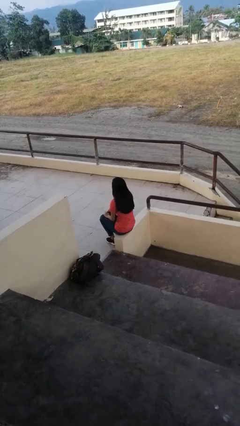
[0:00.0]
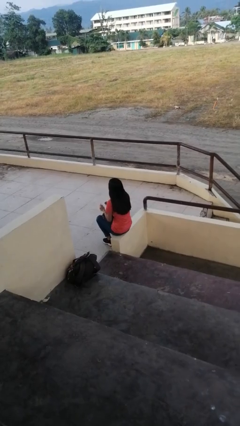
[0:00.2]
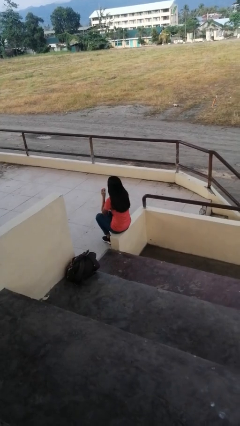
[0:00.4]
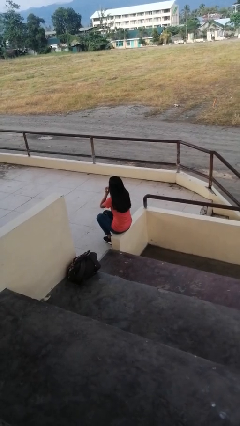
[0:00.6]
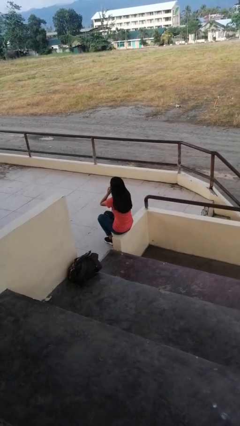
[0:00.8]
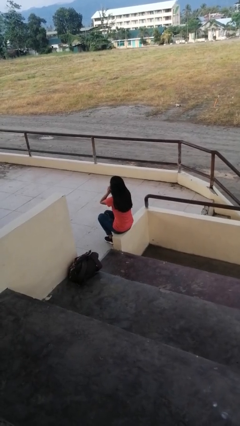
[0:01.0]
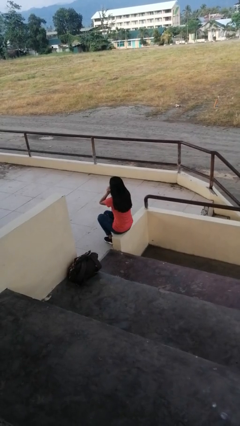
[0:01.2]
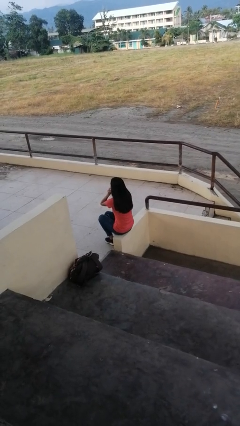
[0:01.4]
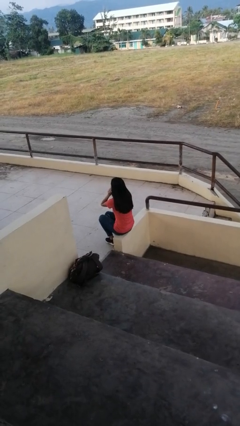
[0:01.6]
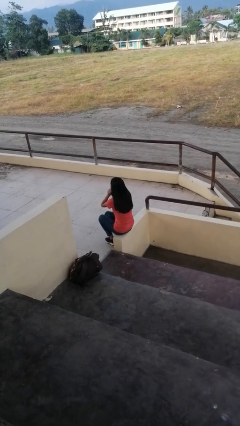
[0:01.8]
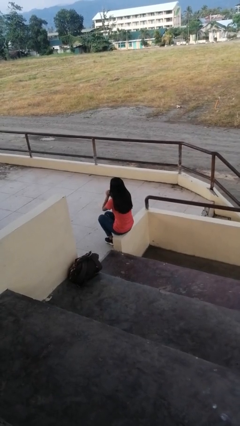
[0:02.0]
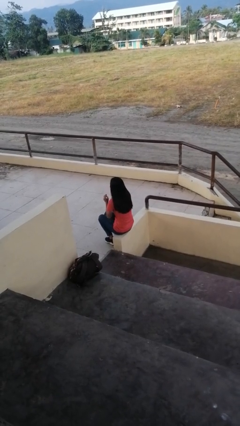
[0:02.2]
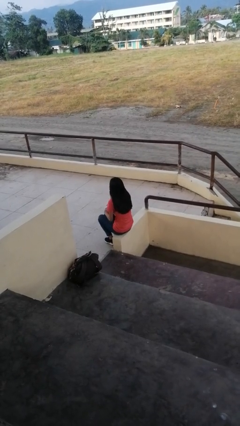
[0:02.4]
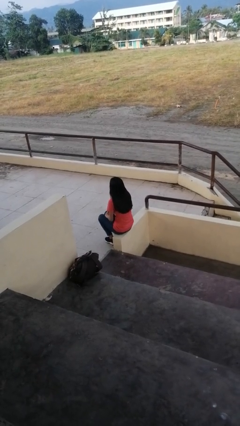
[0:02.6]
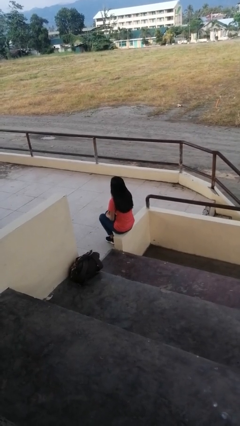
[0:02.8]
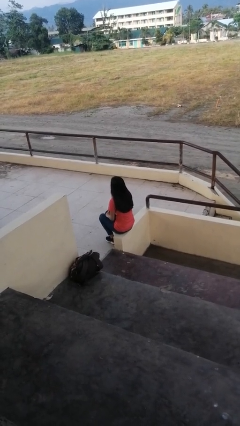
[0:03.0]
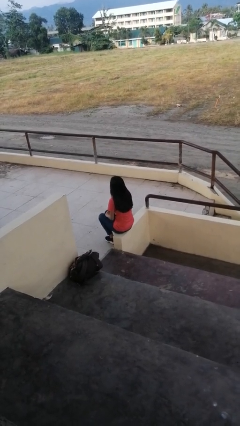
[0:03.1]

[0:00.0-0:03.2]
person puts on headphones

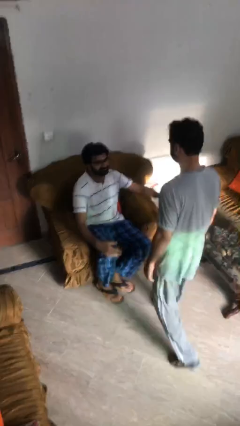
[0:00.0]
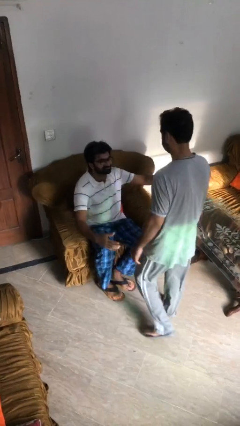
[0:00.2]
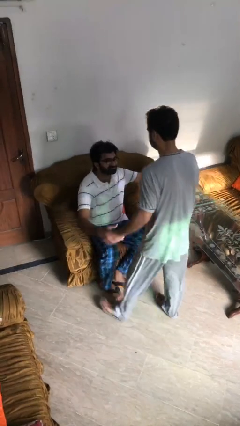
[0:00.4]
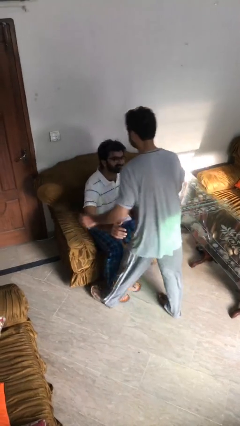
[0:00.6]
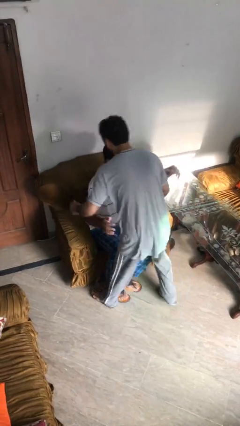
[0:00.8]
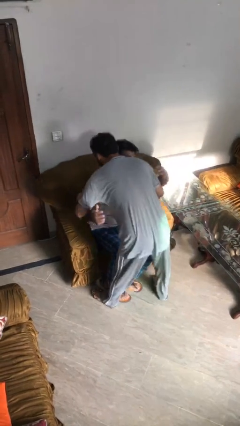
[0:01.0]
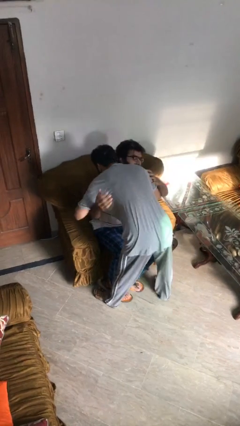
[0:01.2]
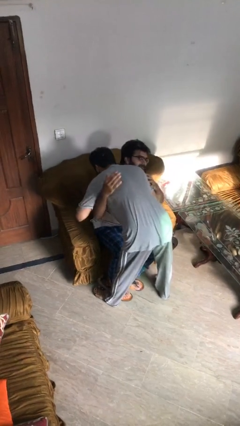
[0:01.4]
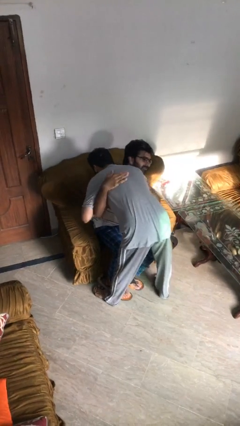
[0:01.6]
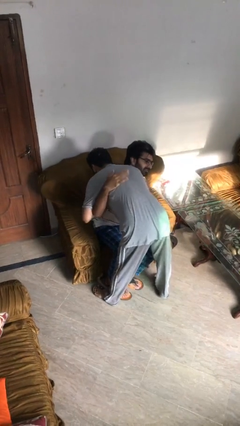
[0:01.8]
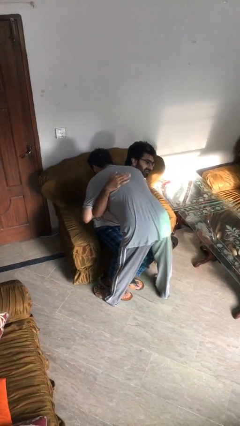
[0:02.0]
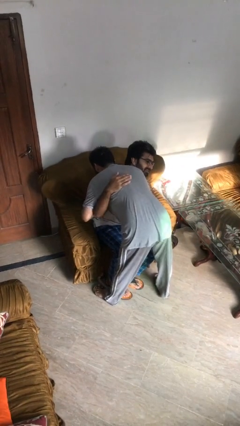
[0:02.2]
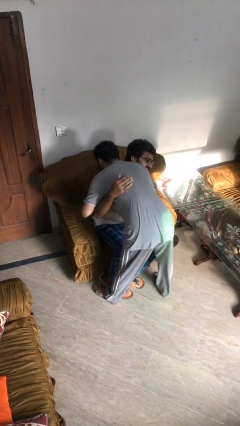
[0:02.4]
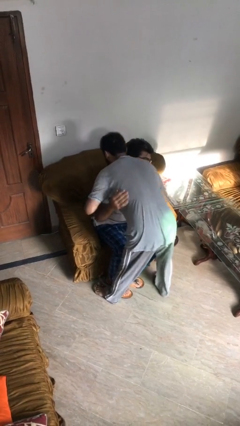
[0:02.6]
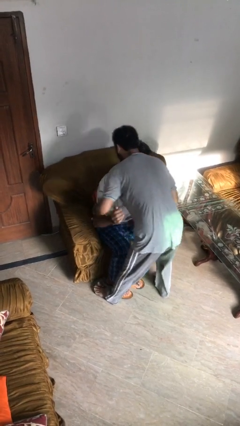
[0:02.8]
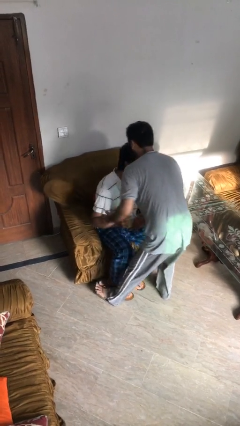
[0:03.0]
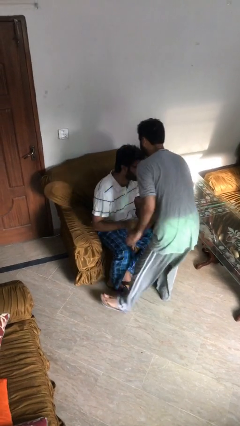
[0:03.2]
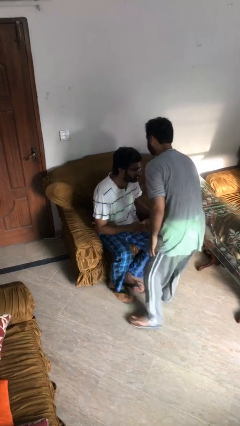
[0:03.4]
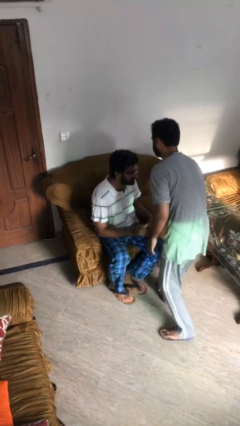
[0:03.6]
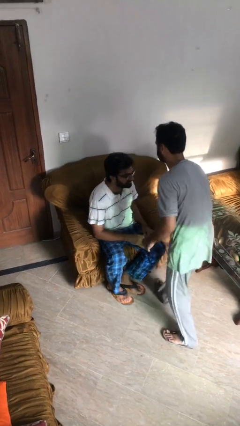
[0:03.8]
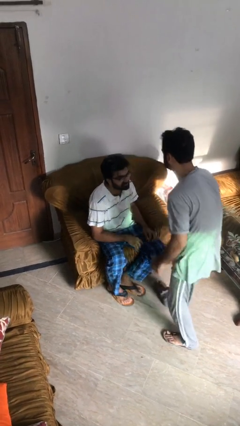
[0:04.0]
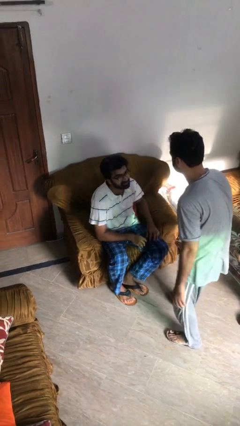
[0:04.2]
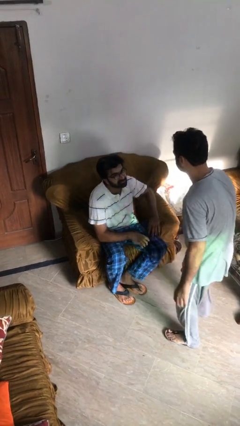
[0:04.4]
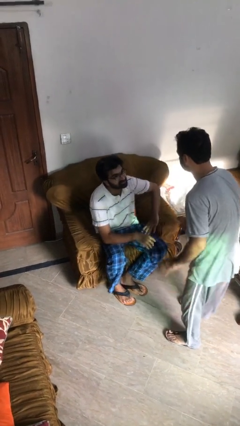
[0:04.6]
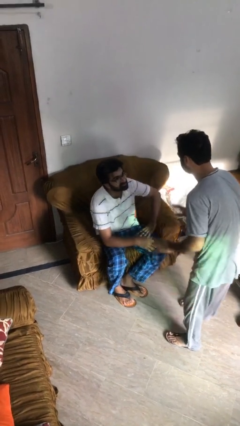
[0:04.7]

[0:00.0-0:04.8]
person embraces person

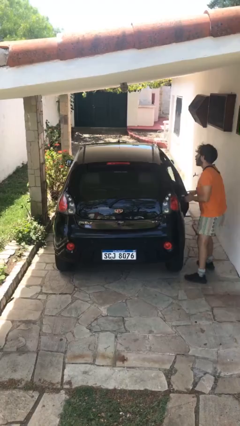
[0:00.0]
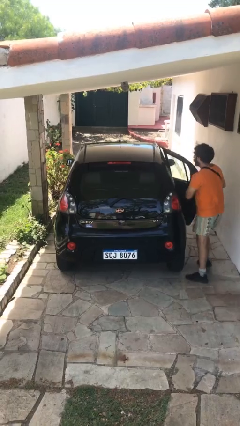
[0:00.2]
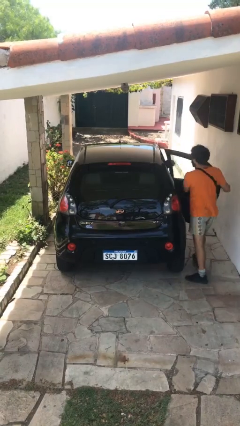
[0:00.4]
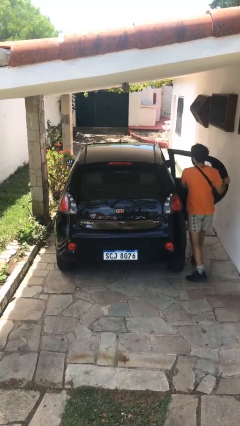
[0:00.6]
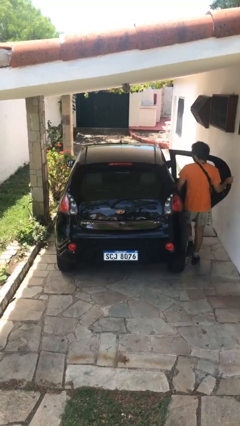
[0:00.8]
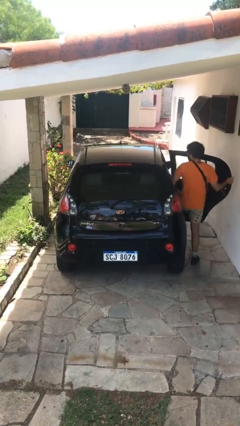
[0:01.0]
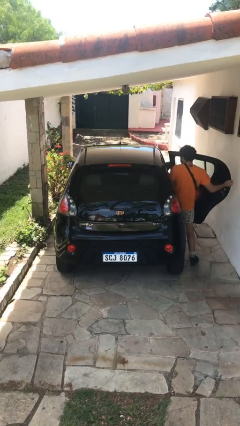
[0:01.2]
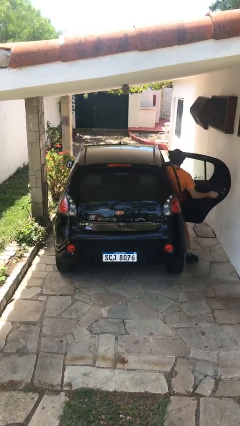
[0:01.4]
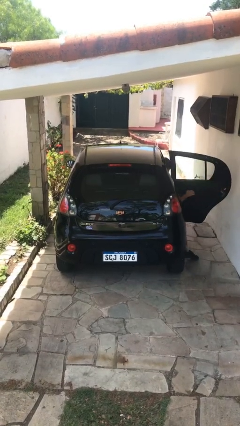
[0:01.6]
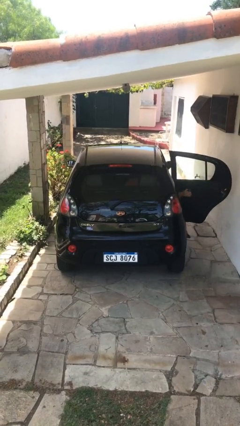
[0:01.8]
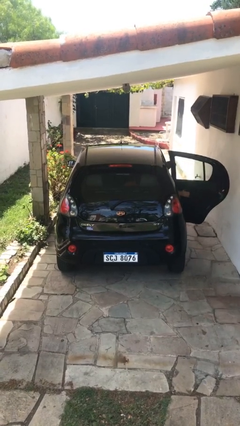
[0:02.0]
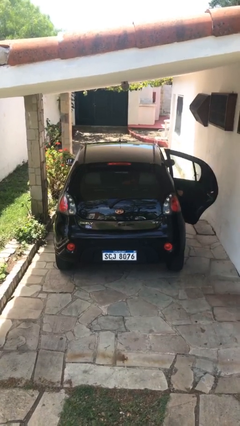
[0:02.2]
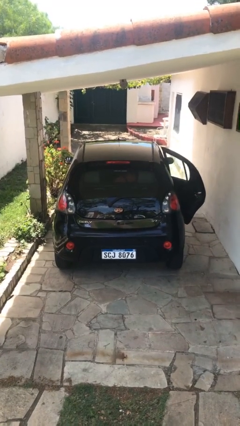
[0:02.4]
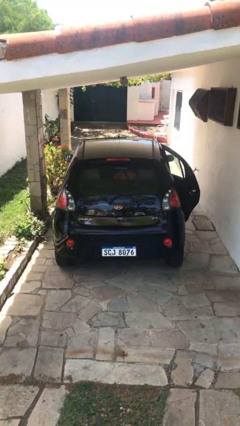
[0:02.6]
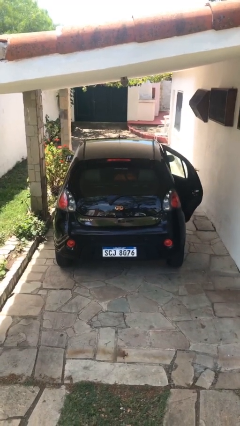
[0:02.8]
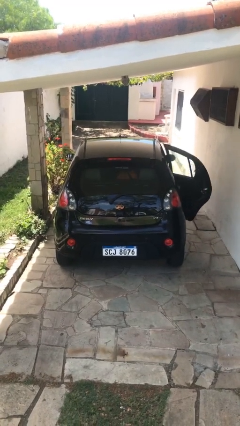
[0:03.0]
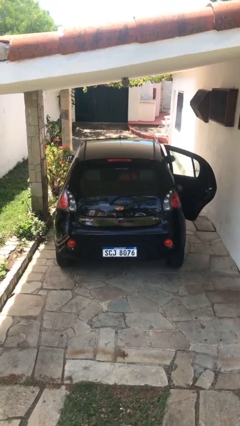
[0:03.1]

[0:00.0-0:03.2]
car picks up person

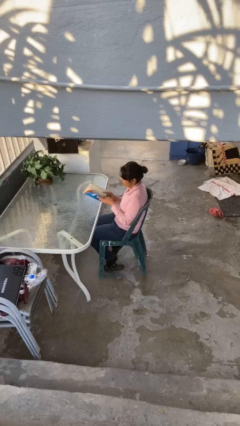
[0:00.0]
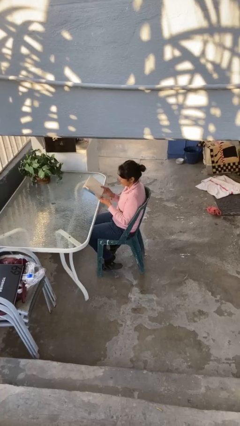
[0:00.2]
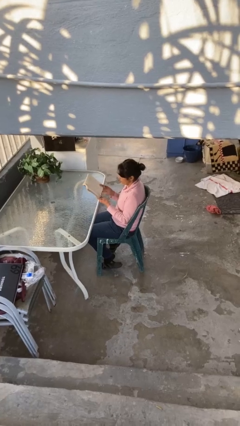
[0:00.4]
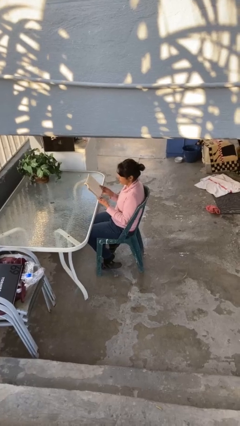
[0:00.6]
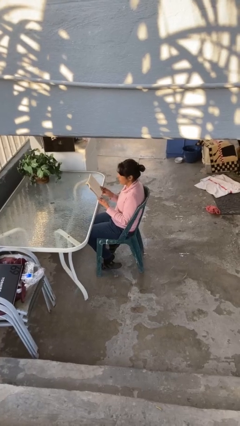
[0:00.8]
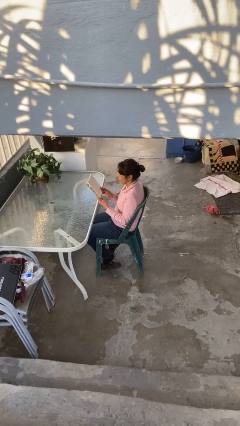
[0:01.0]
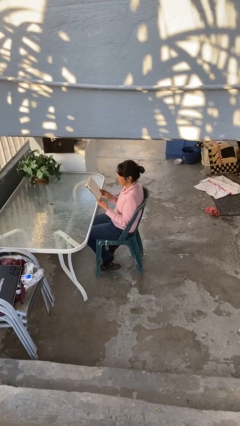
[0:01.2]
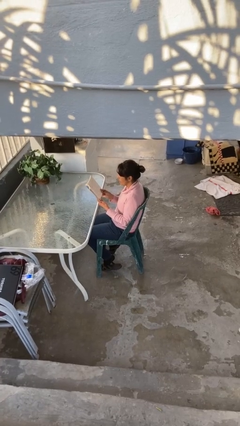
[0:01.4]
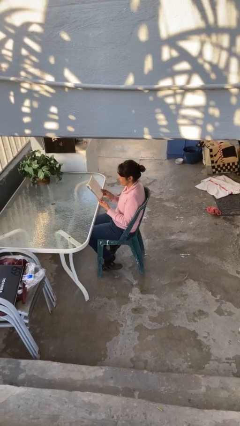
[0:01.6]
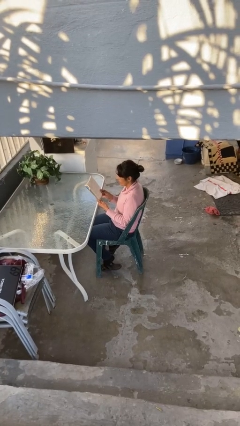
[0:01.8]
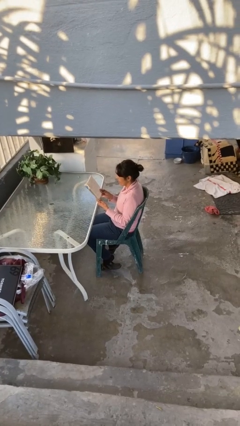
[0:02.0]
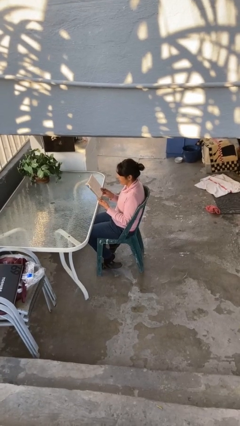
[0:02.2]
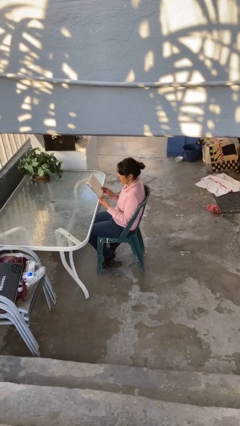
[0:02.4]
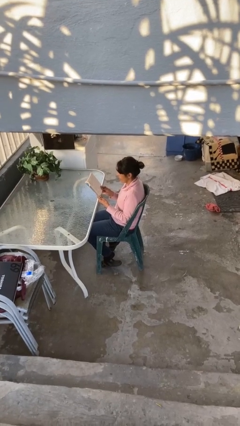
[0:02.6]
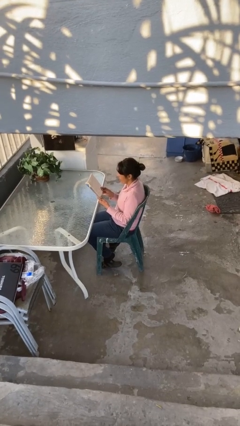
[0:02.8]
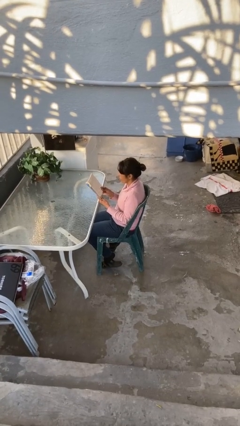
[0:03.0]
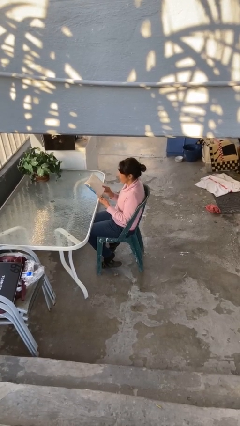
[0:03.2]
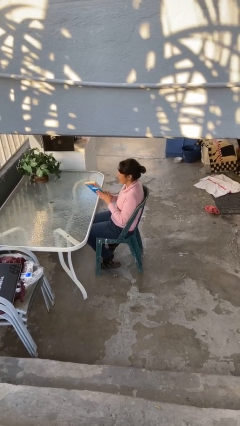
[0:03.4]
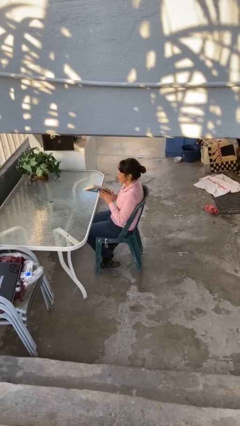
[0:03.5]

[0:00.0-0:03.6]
person reads document

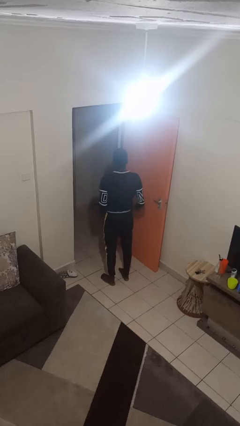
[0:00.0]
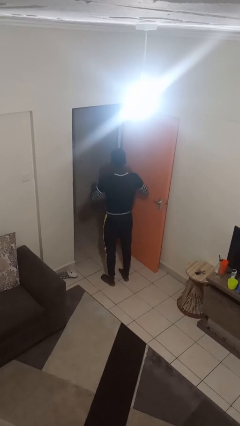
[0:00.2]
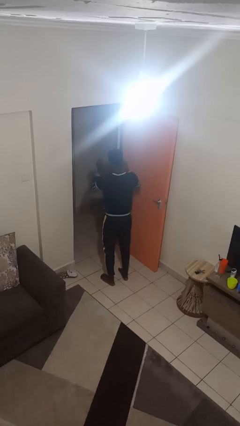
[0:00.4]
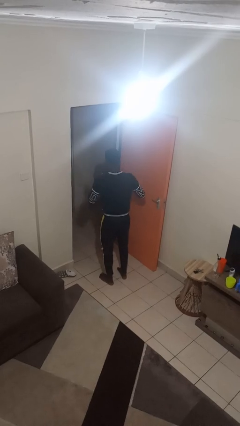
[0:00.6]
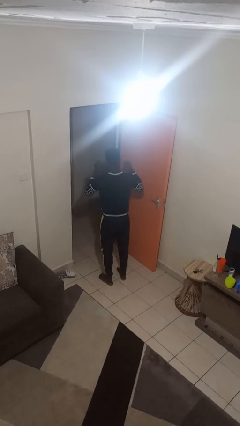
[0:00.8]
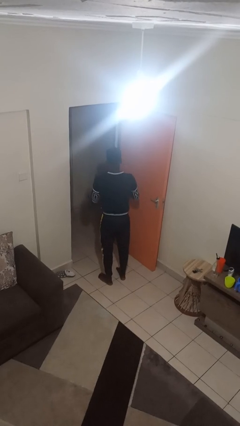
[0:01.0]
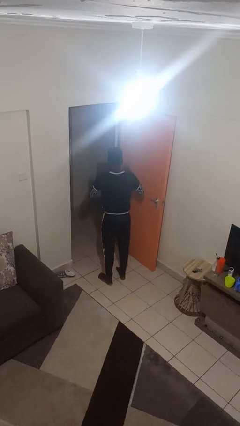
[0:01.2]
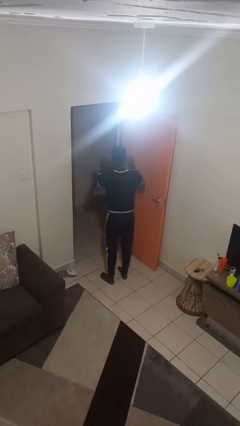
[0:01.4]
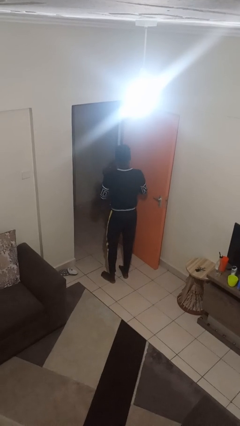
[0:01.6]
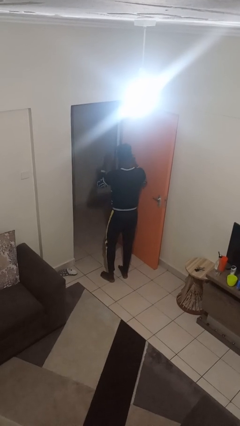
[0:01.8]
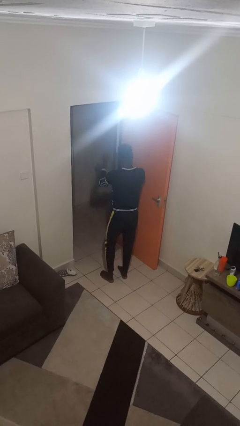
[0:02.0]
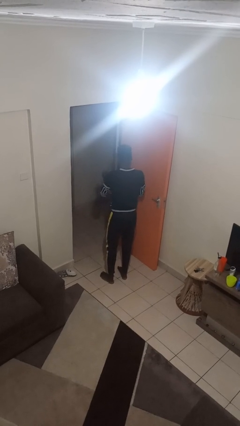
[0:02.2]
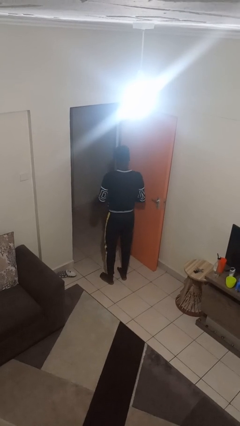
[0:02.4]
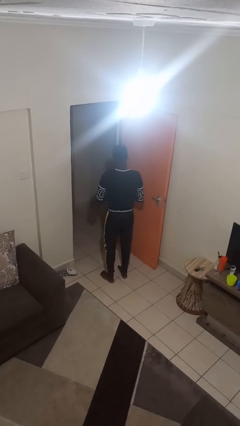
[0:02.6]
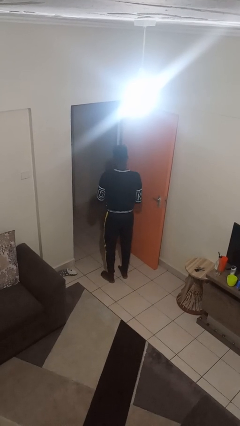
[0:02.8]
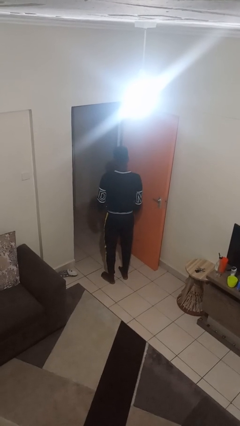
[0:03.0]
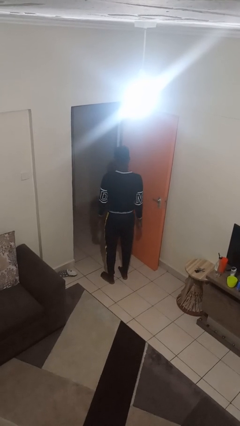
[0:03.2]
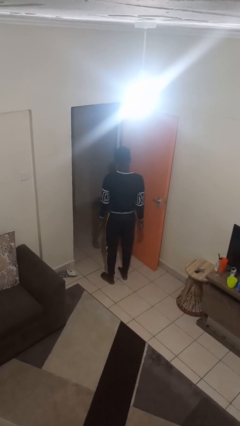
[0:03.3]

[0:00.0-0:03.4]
person snaps fingers
